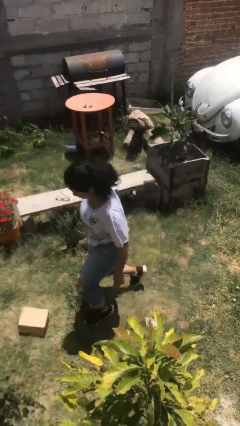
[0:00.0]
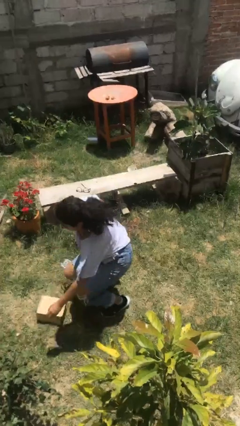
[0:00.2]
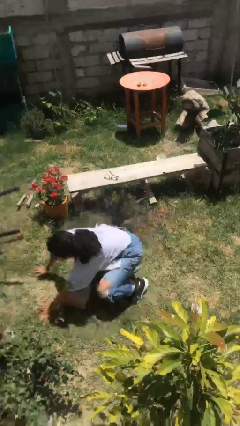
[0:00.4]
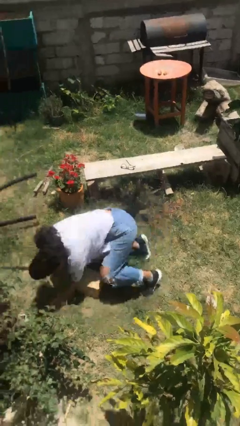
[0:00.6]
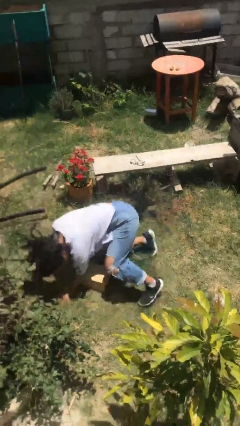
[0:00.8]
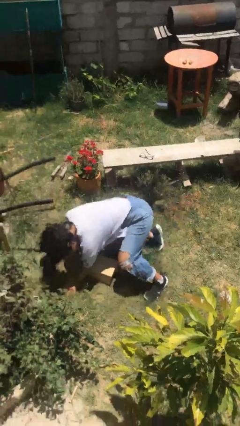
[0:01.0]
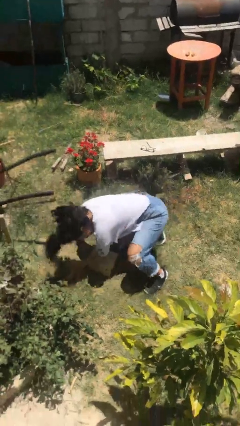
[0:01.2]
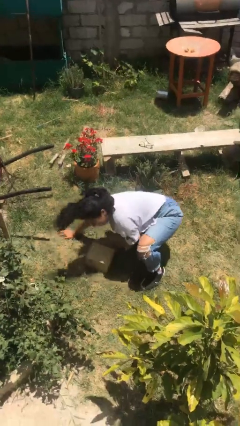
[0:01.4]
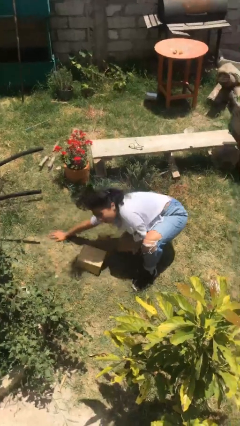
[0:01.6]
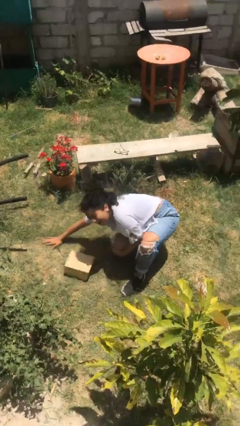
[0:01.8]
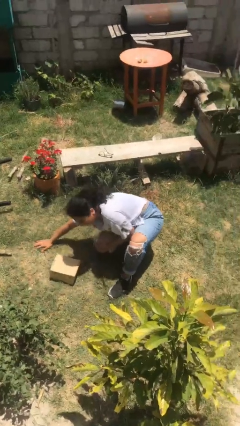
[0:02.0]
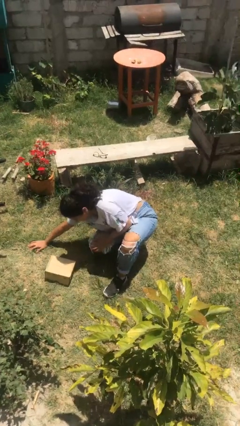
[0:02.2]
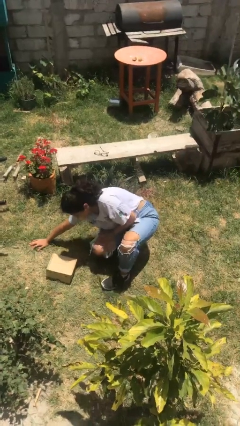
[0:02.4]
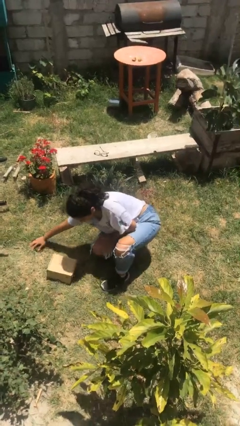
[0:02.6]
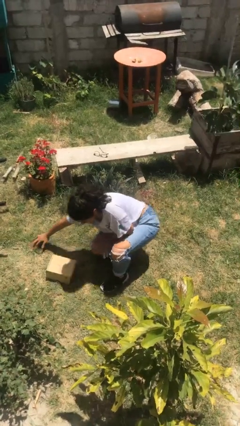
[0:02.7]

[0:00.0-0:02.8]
person lies down on floor

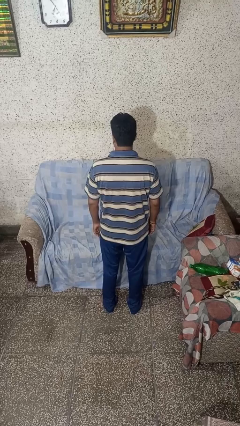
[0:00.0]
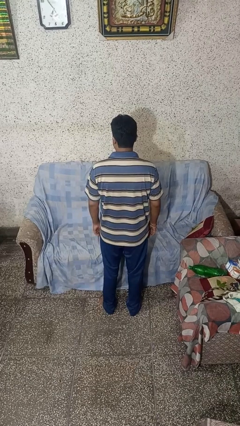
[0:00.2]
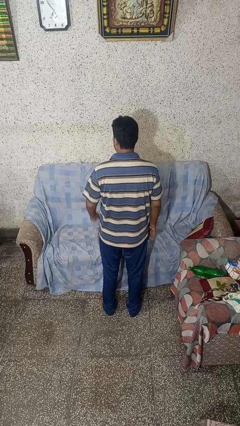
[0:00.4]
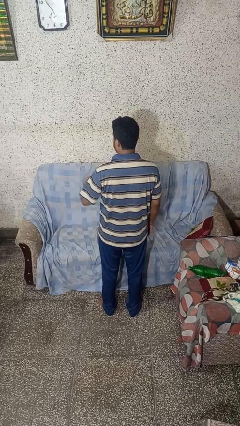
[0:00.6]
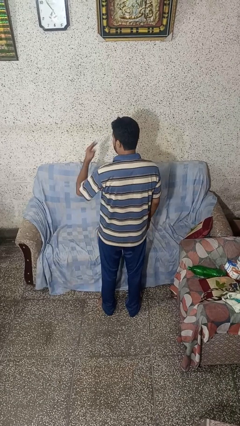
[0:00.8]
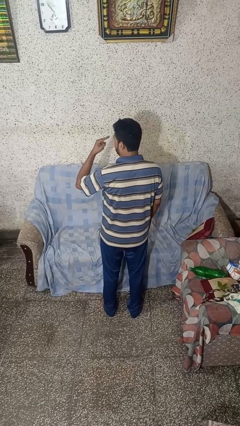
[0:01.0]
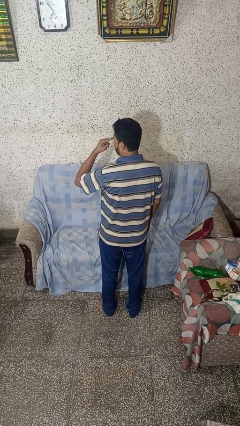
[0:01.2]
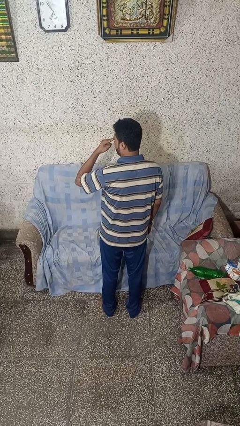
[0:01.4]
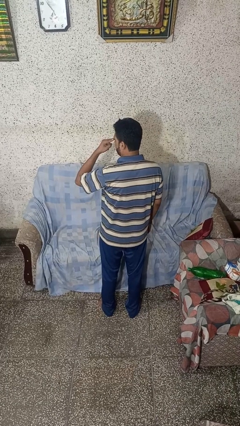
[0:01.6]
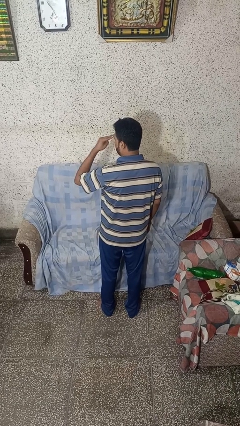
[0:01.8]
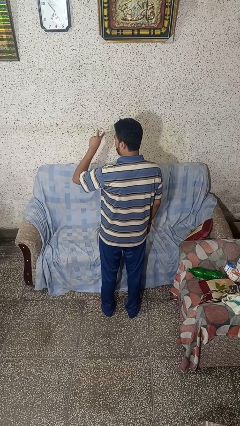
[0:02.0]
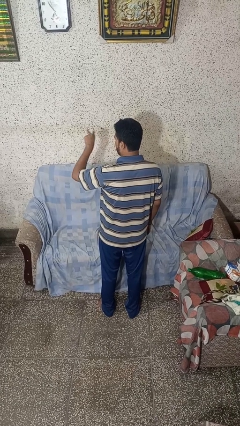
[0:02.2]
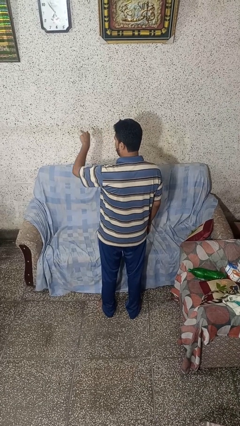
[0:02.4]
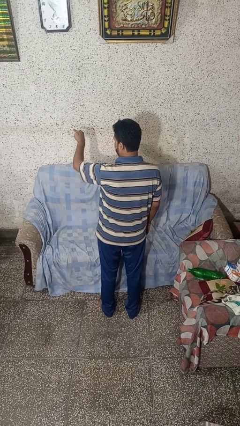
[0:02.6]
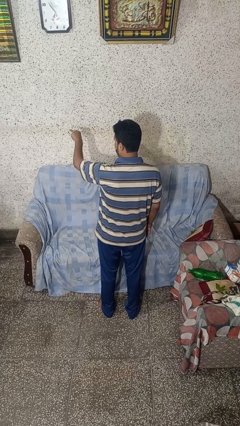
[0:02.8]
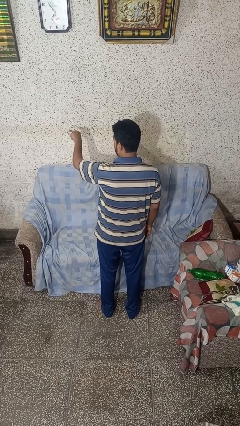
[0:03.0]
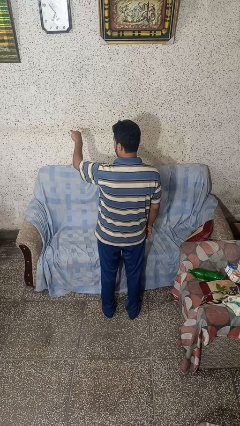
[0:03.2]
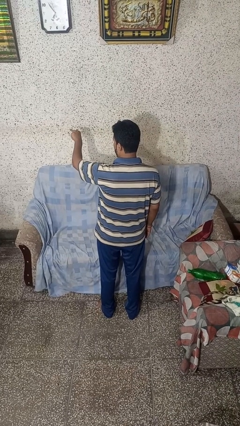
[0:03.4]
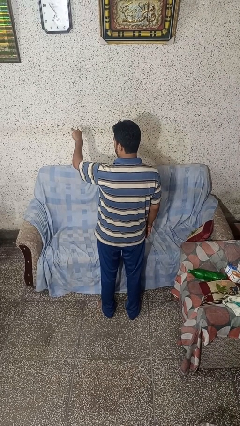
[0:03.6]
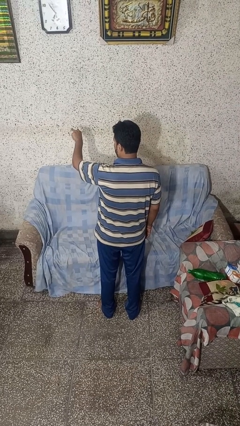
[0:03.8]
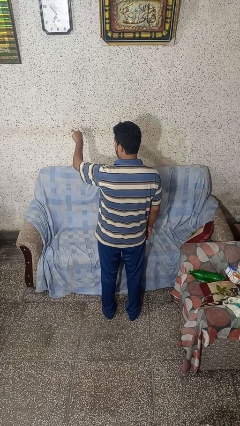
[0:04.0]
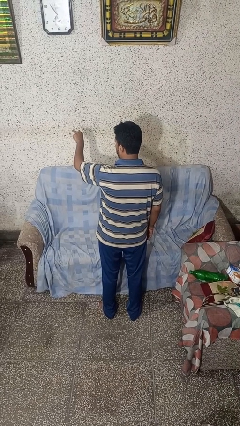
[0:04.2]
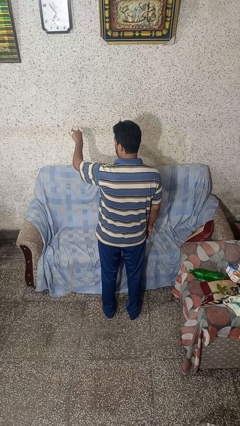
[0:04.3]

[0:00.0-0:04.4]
person gestures watch closely

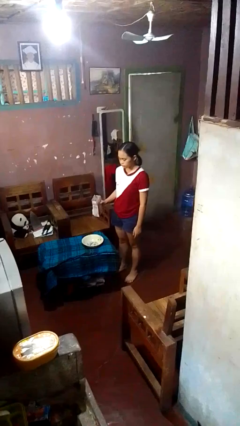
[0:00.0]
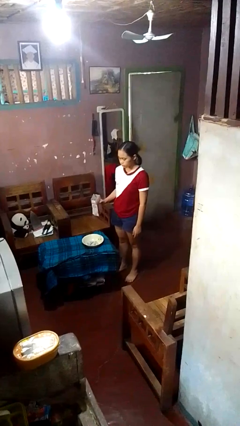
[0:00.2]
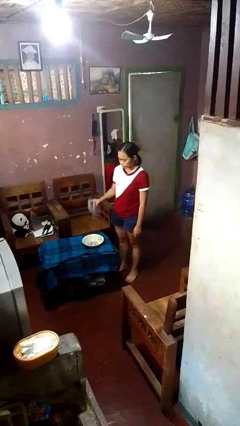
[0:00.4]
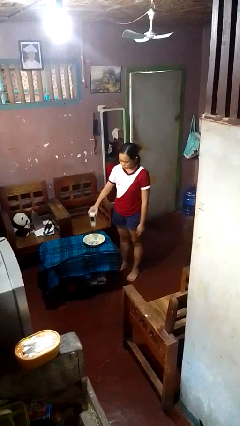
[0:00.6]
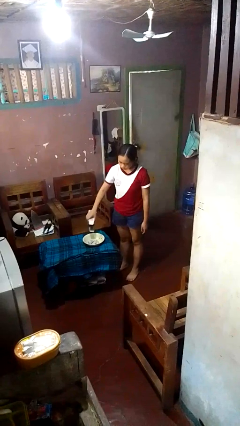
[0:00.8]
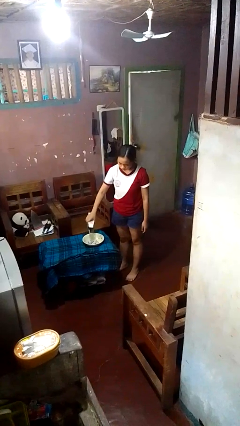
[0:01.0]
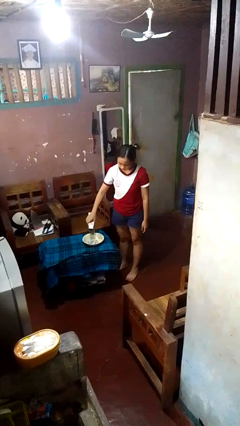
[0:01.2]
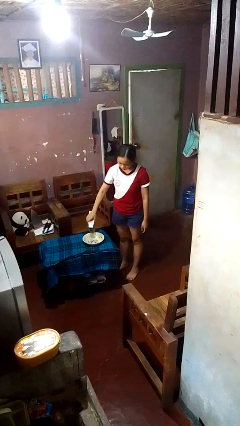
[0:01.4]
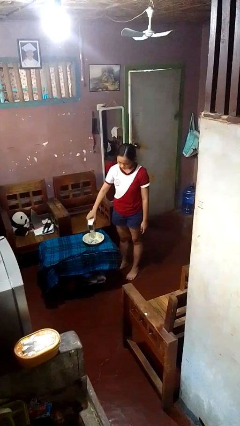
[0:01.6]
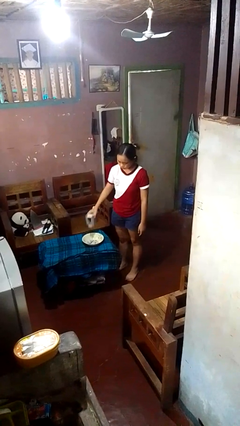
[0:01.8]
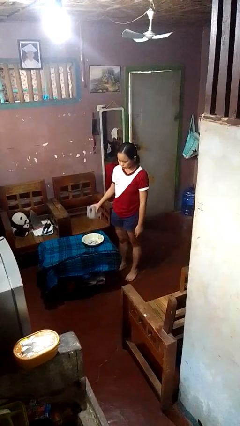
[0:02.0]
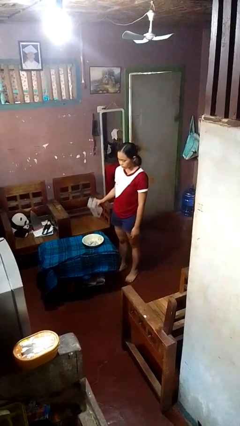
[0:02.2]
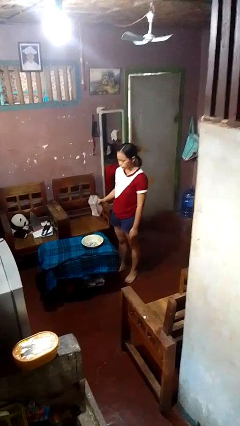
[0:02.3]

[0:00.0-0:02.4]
person pours into bowl

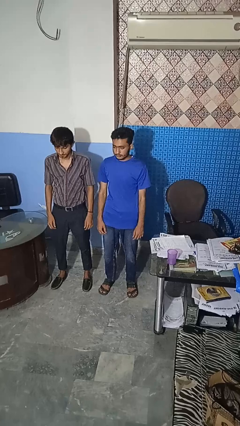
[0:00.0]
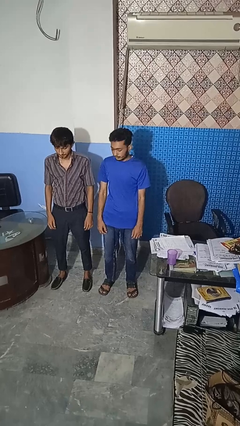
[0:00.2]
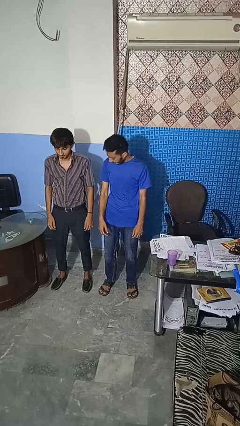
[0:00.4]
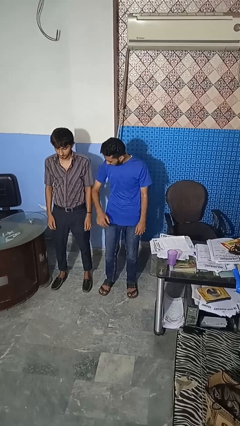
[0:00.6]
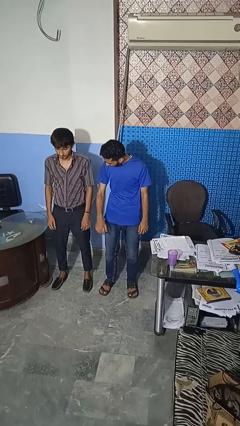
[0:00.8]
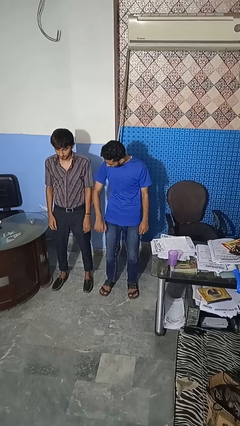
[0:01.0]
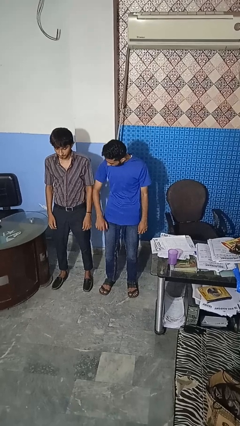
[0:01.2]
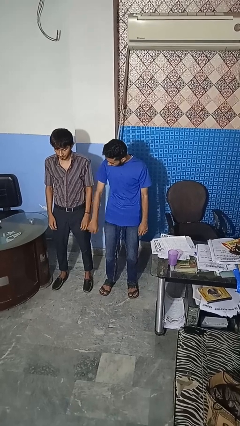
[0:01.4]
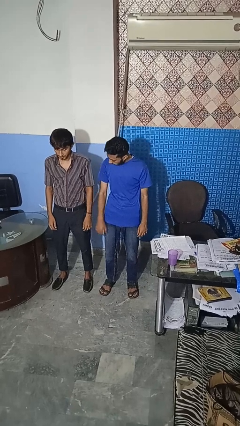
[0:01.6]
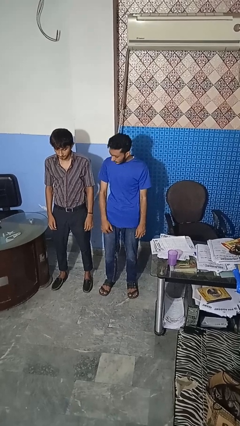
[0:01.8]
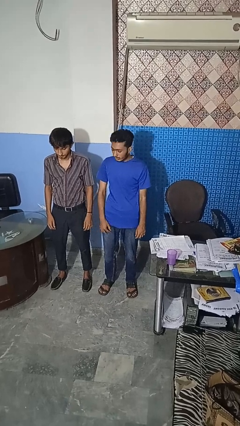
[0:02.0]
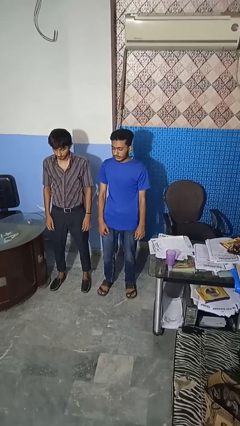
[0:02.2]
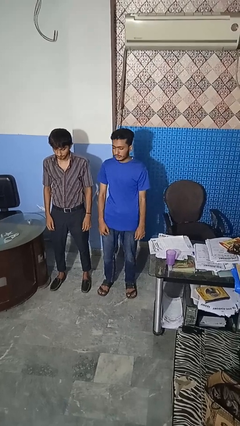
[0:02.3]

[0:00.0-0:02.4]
person nudges person with elbow

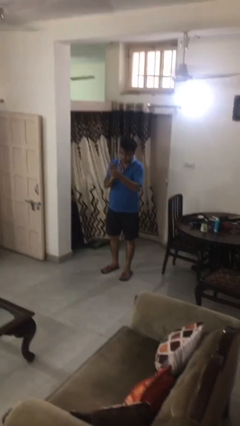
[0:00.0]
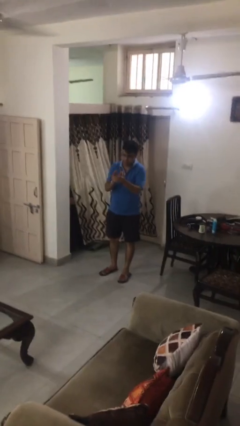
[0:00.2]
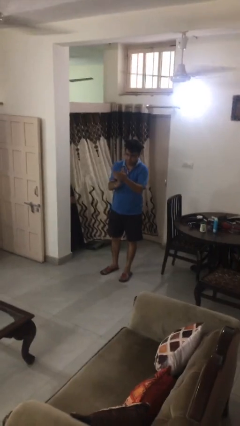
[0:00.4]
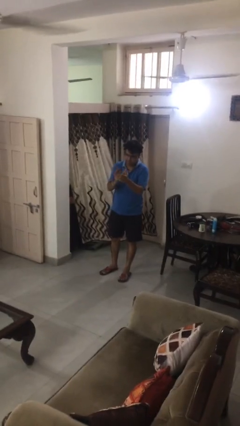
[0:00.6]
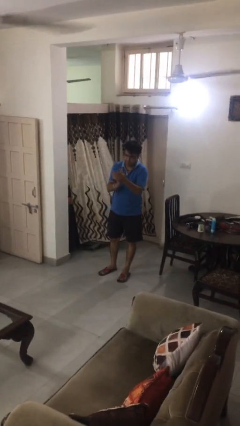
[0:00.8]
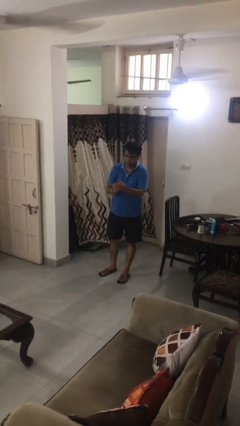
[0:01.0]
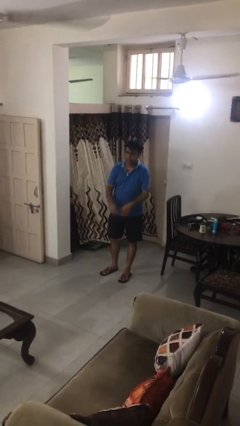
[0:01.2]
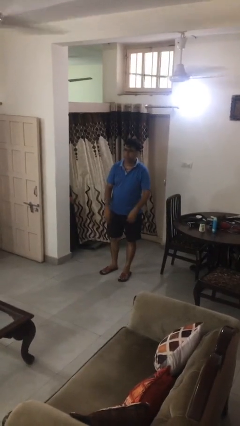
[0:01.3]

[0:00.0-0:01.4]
person claps hands

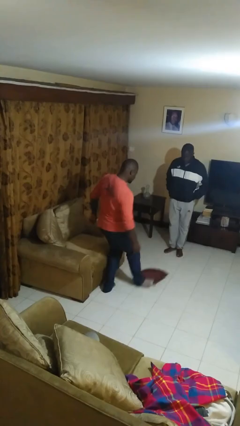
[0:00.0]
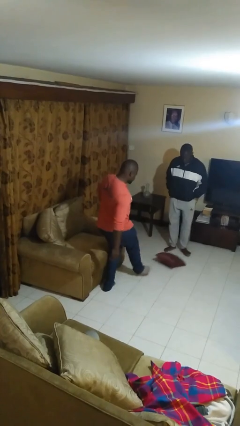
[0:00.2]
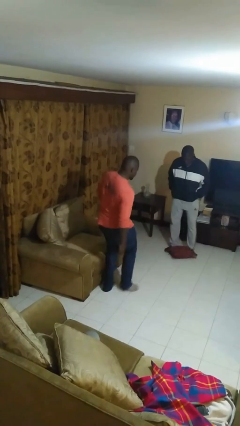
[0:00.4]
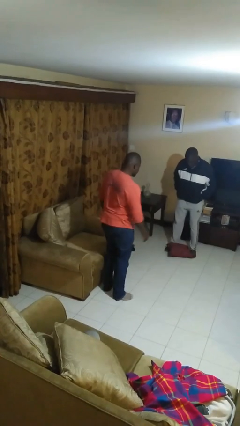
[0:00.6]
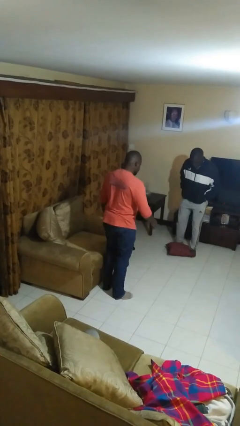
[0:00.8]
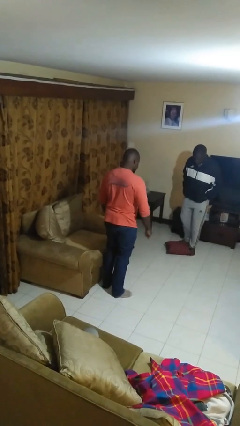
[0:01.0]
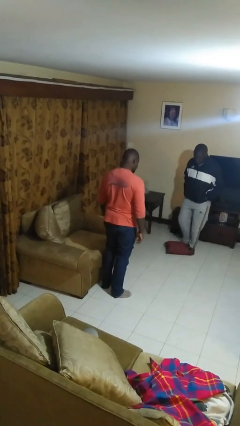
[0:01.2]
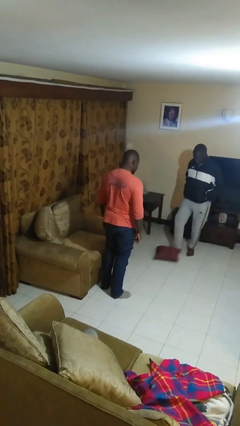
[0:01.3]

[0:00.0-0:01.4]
person kicks object to person

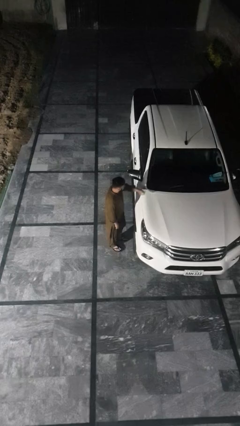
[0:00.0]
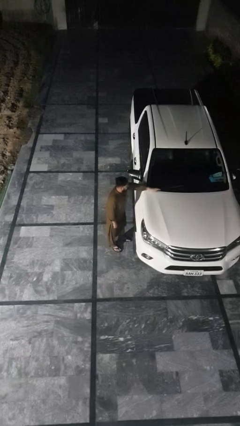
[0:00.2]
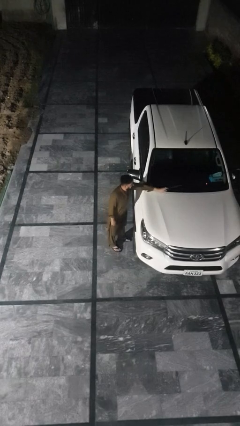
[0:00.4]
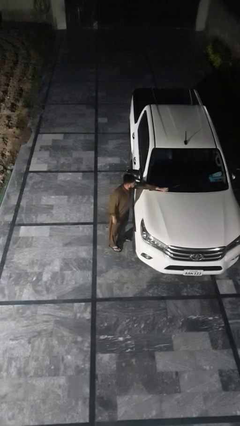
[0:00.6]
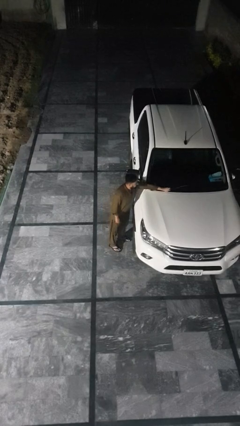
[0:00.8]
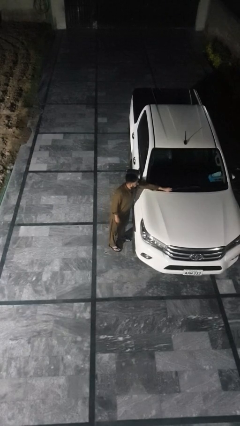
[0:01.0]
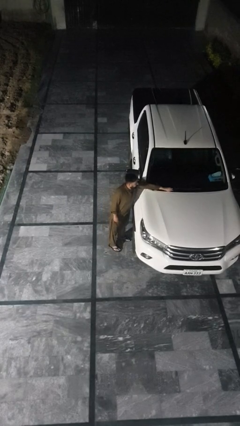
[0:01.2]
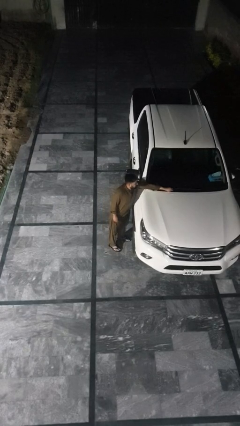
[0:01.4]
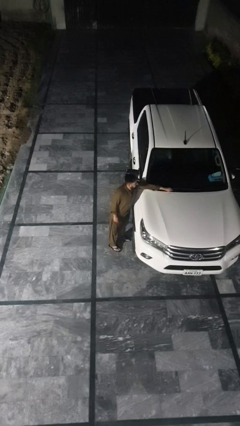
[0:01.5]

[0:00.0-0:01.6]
person flips down car wipers

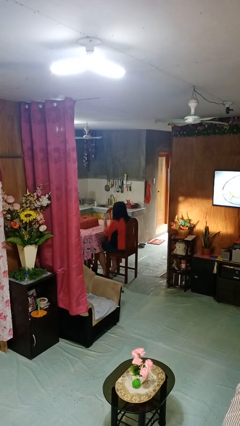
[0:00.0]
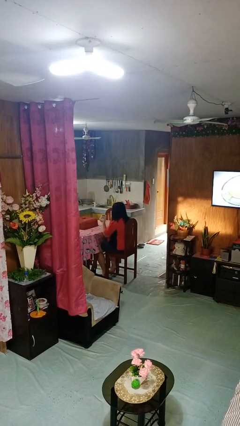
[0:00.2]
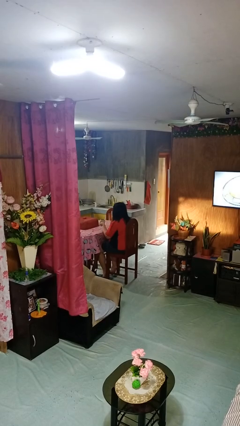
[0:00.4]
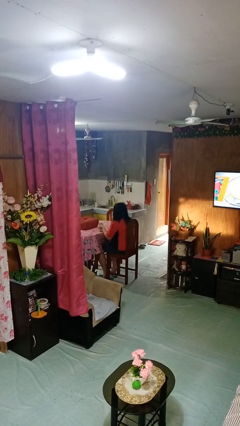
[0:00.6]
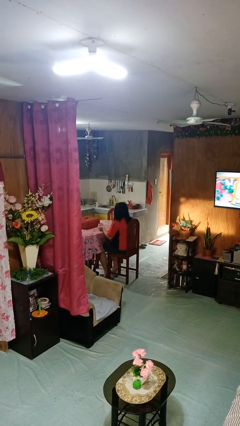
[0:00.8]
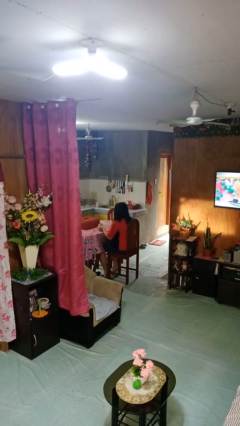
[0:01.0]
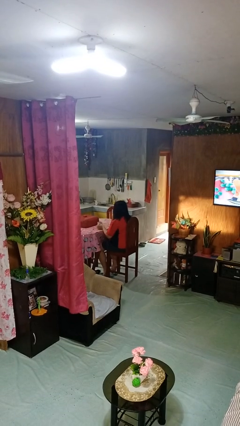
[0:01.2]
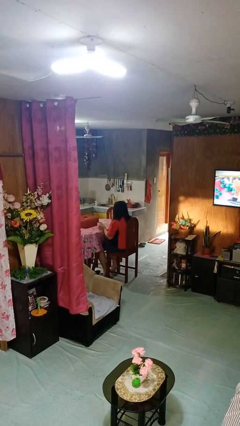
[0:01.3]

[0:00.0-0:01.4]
person puts down object on table
